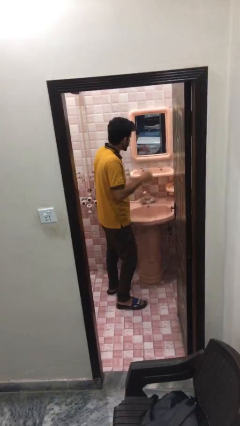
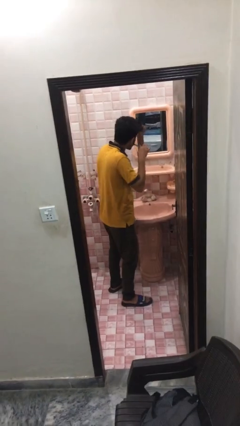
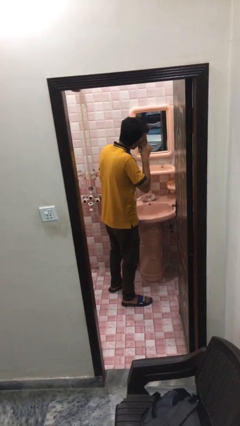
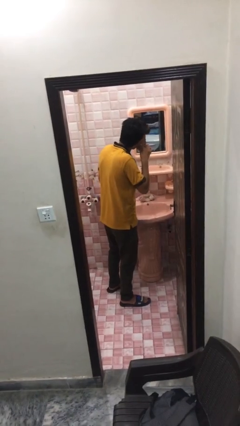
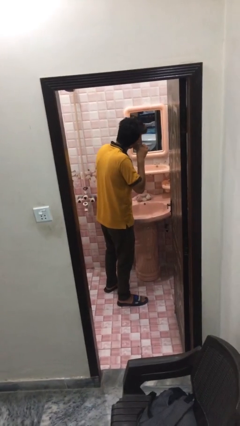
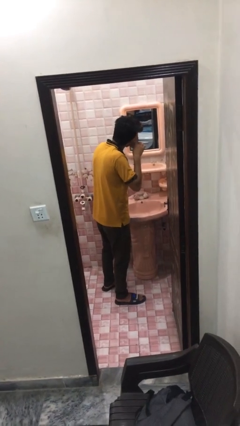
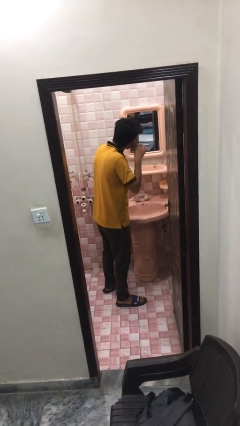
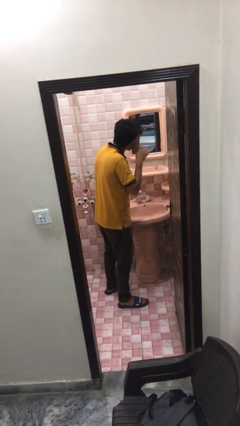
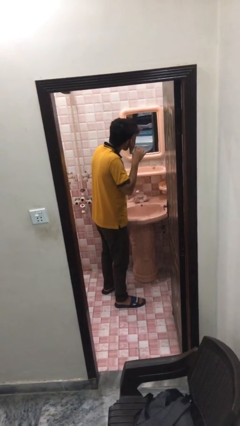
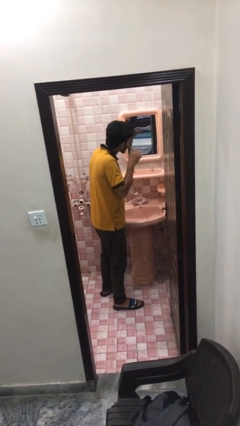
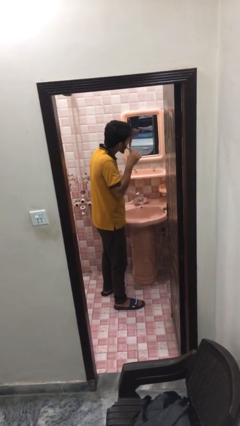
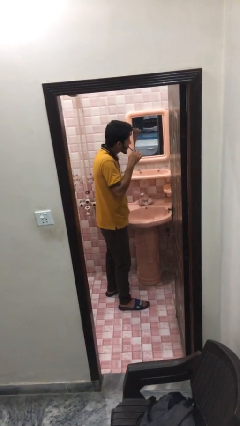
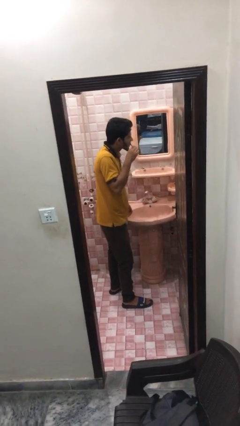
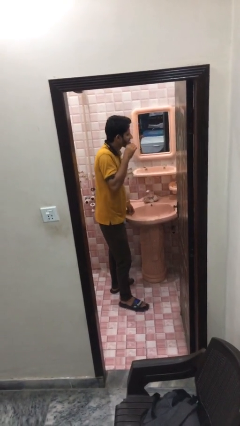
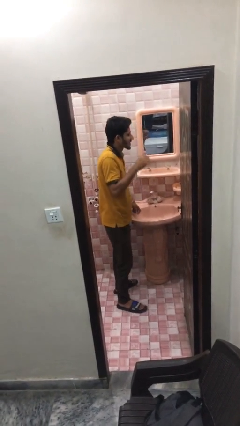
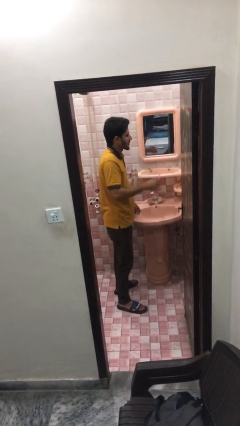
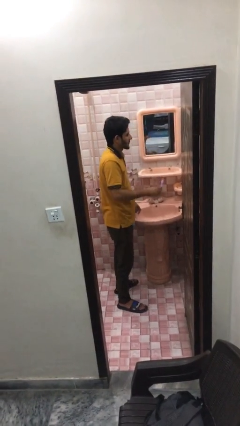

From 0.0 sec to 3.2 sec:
person brushes teeth

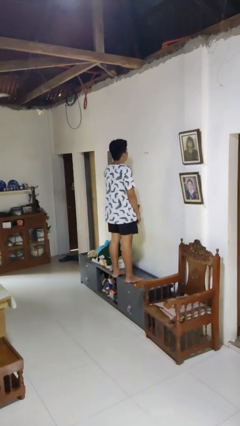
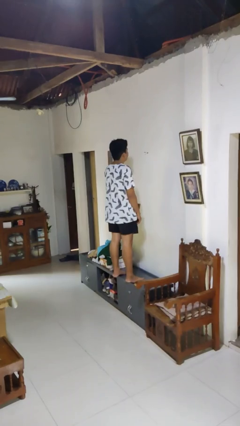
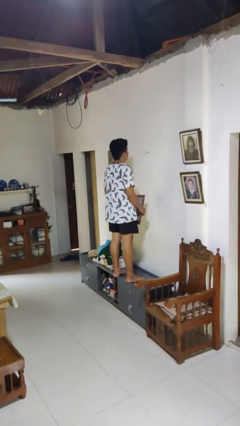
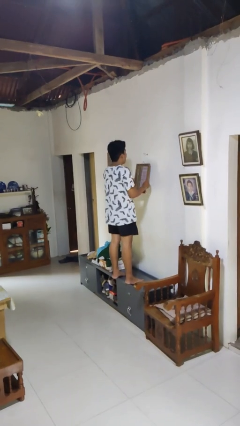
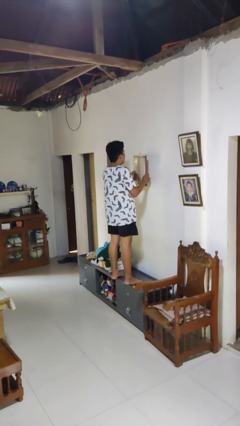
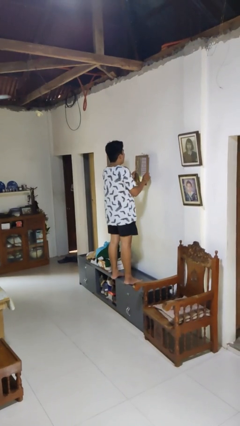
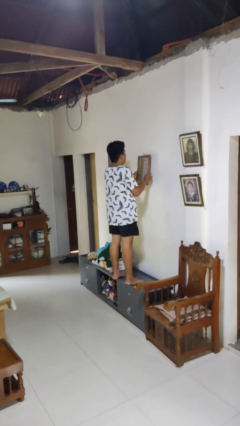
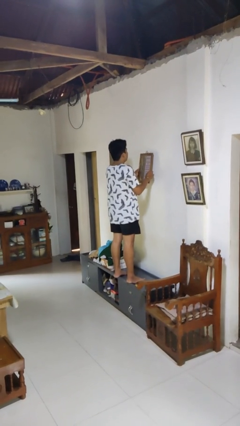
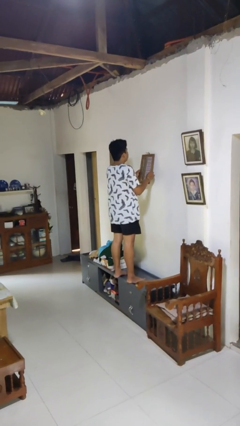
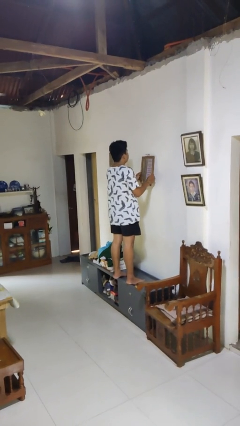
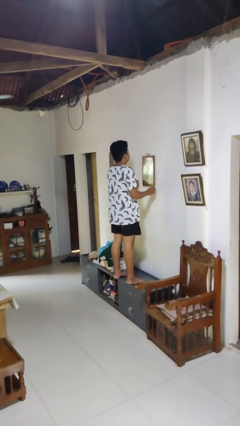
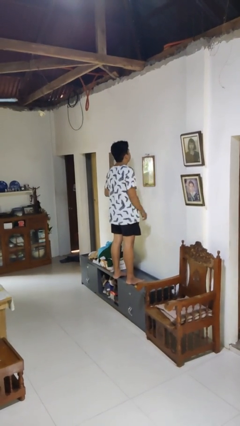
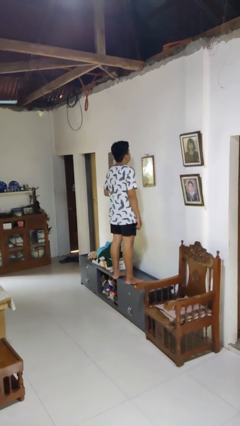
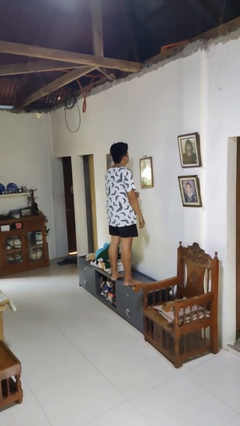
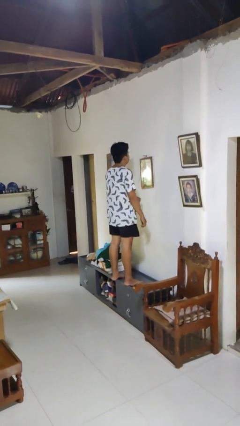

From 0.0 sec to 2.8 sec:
person puts up picture frame

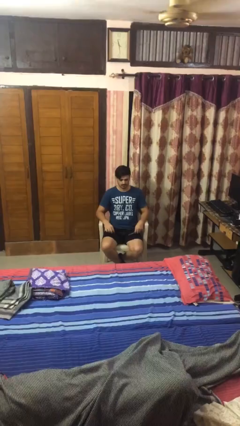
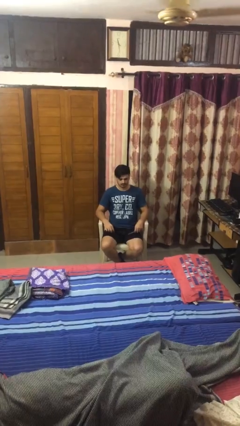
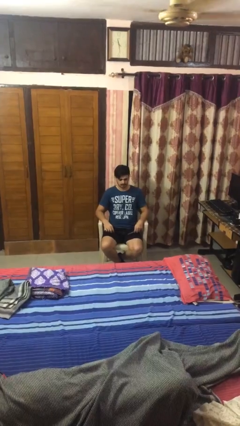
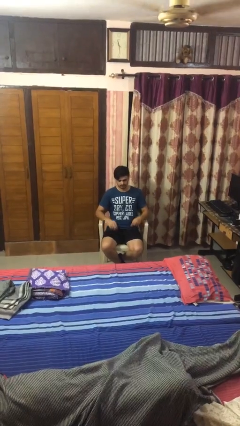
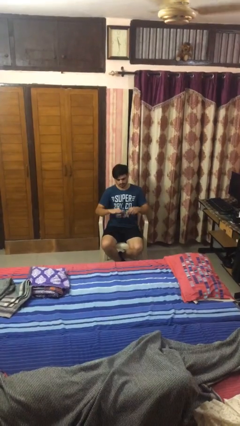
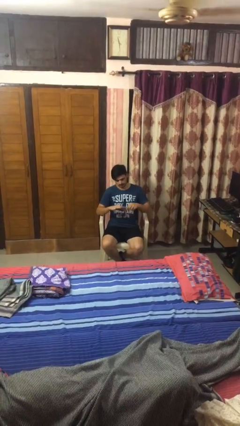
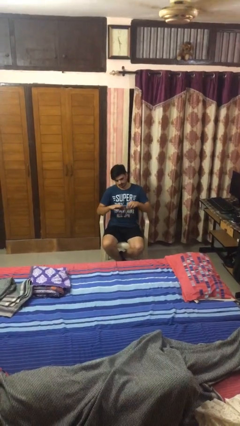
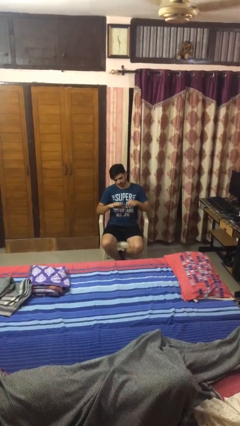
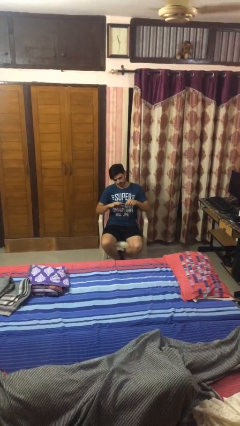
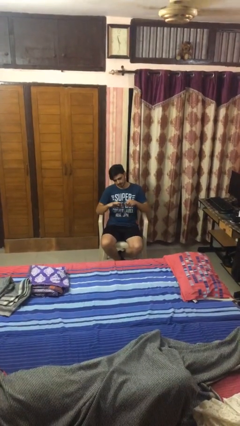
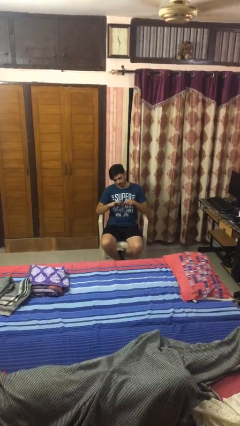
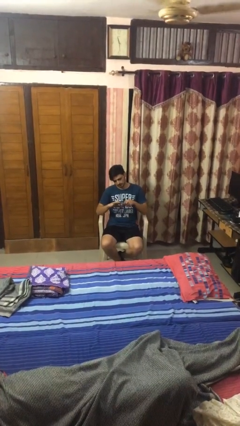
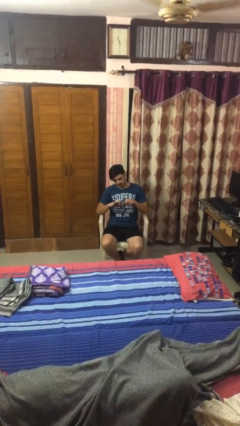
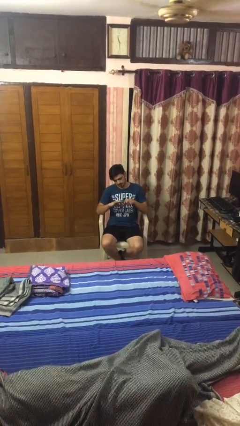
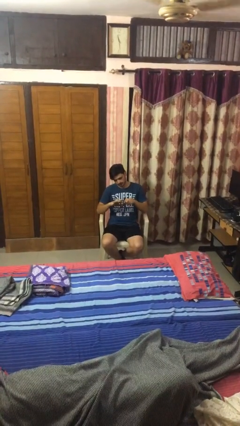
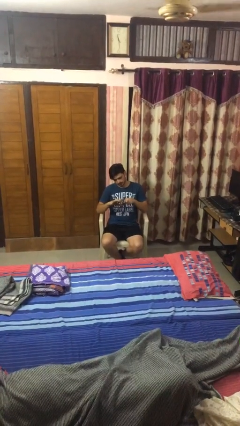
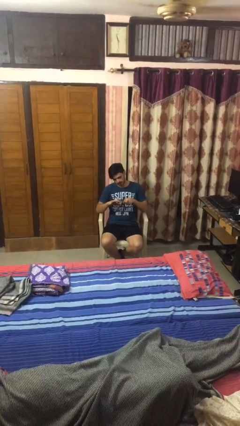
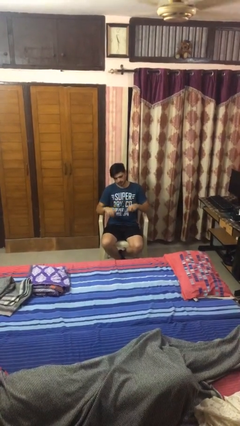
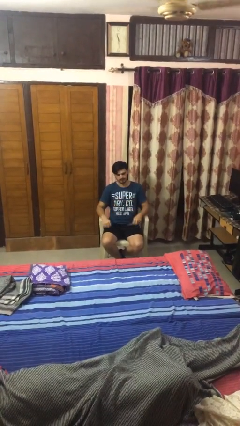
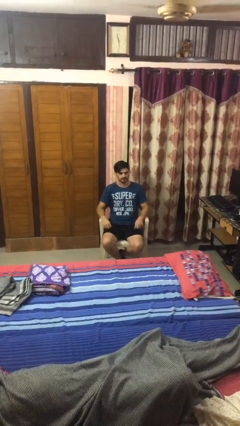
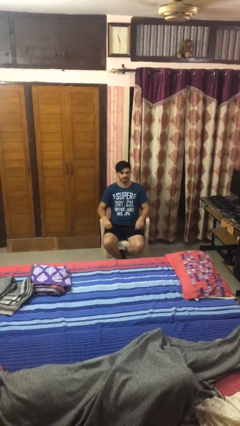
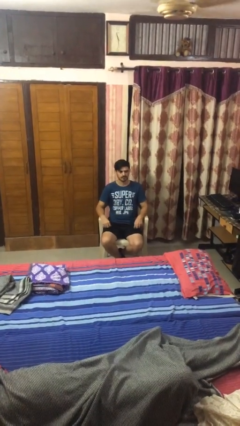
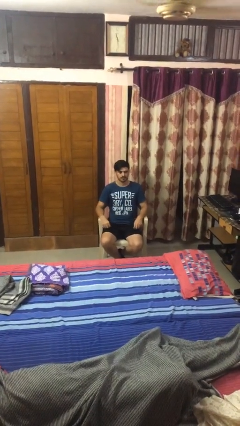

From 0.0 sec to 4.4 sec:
person files fingernails

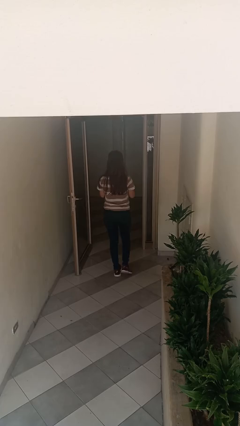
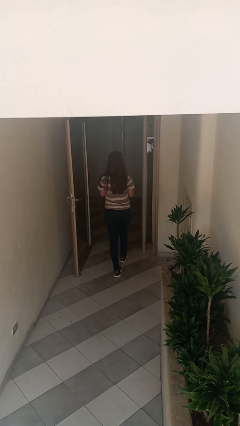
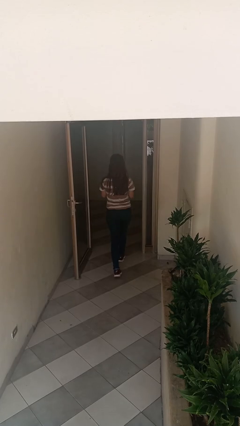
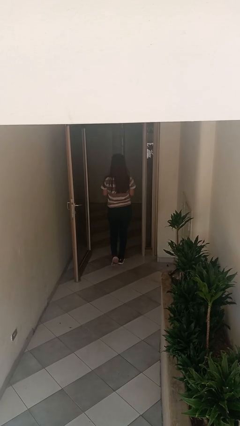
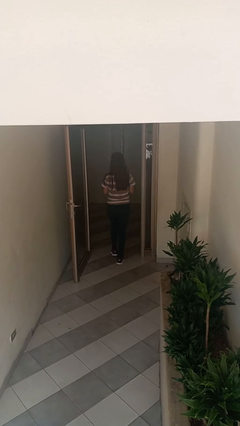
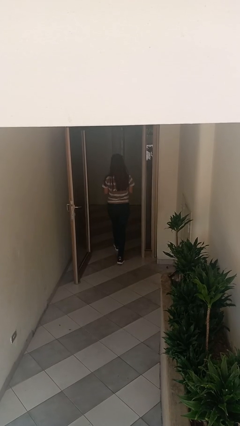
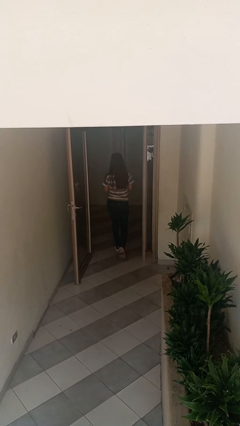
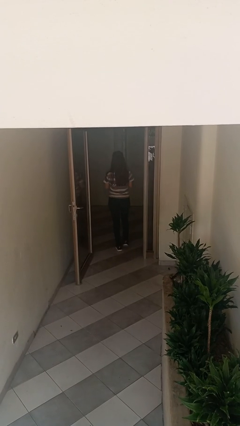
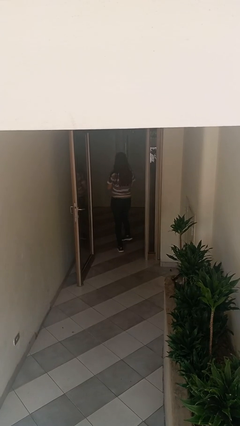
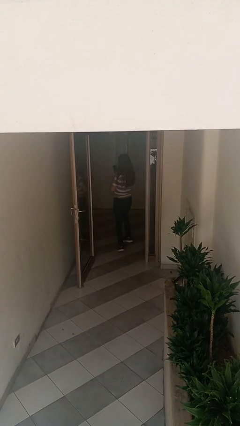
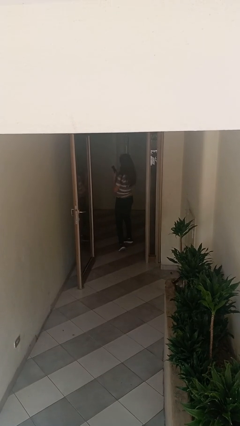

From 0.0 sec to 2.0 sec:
person exits scene through structure

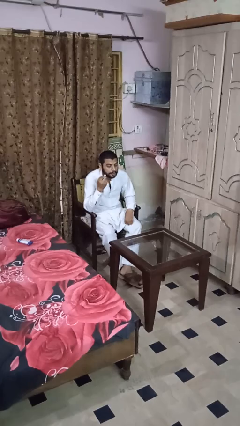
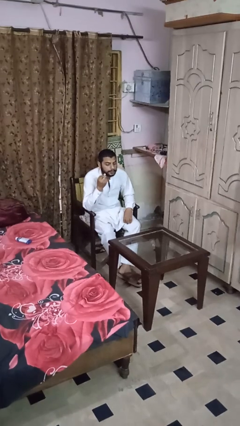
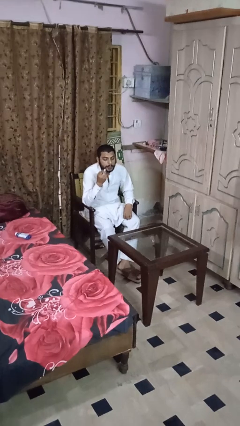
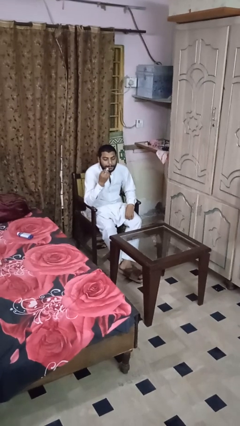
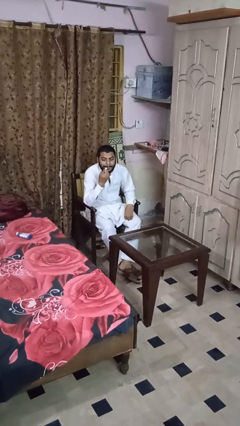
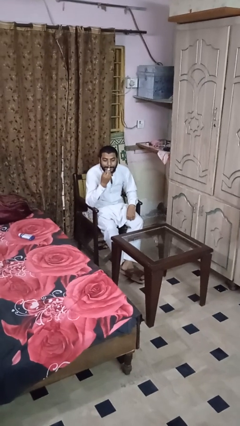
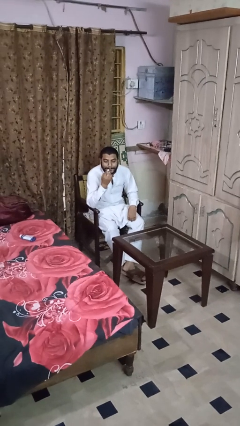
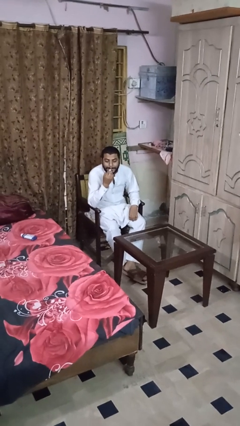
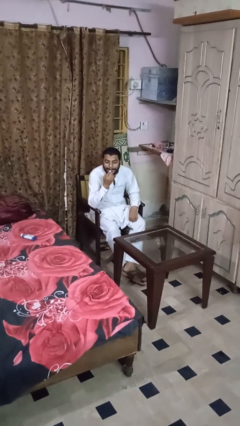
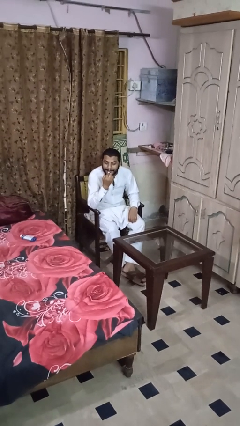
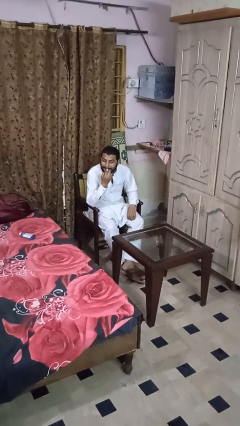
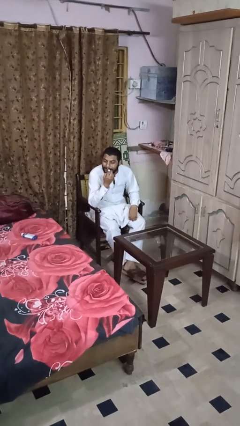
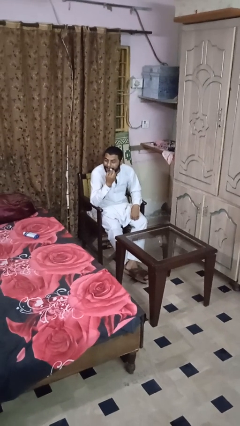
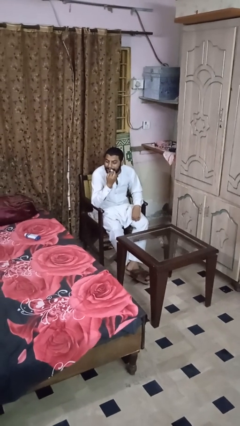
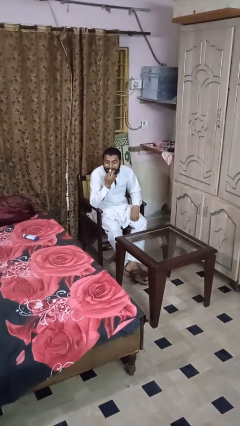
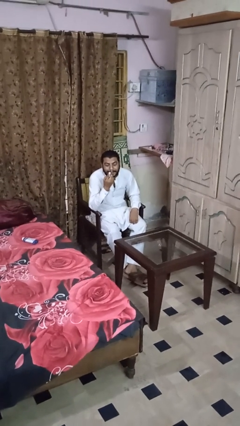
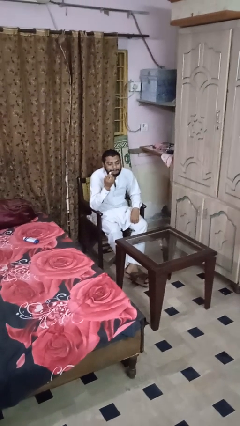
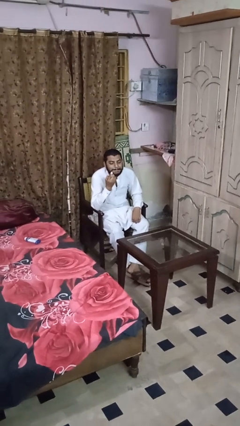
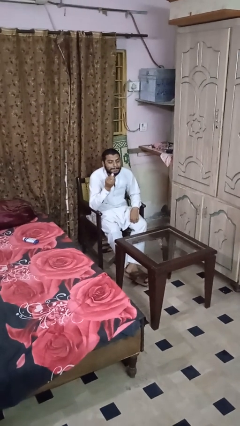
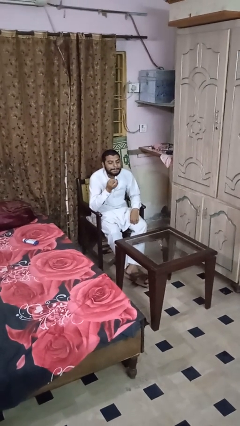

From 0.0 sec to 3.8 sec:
person applies lip makeup

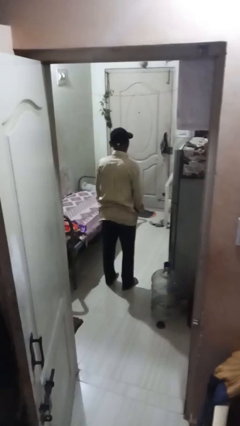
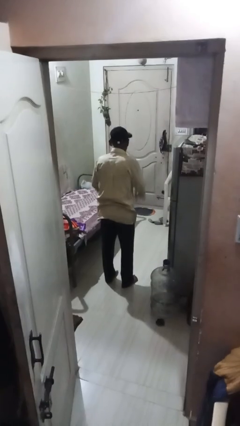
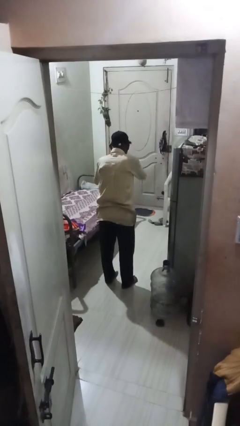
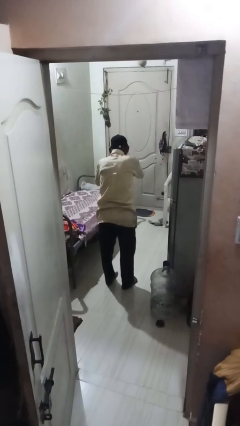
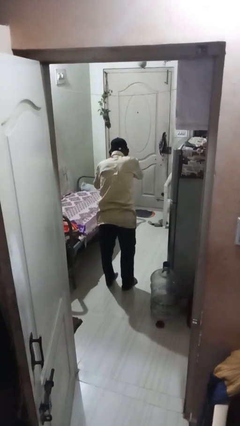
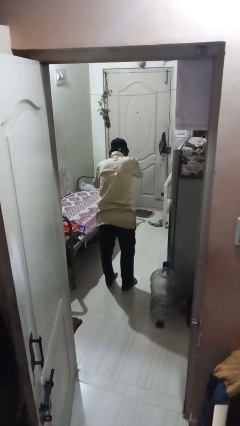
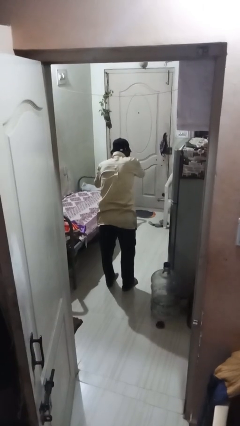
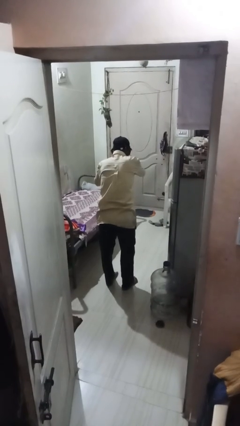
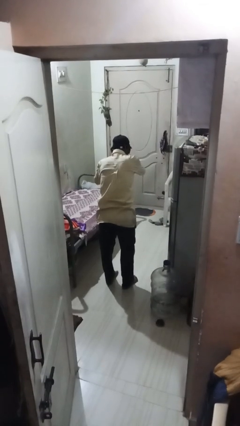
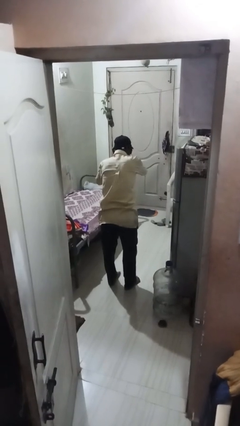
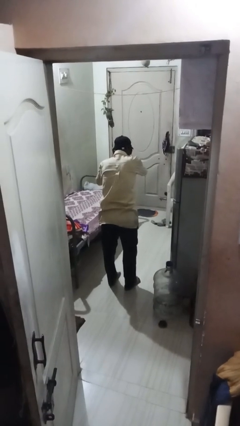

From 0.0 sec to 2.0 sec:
person prays
